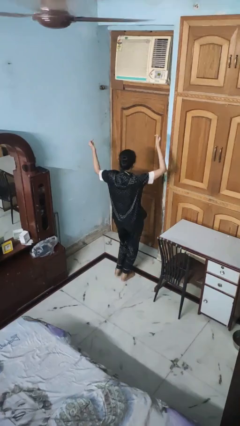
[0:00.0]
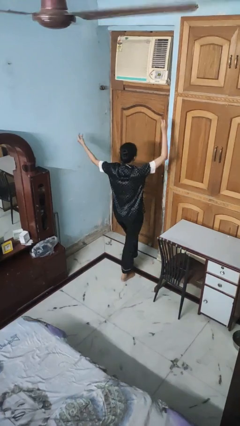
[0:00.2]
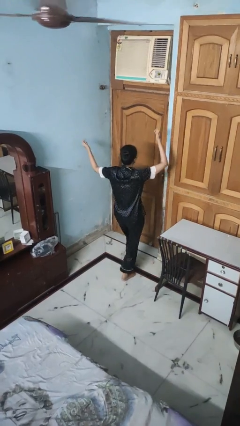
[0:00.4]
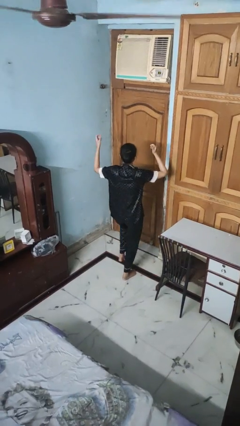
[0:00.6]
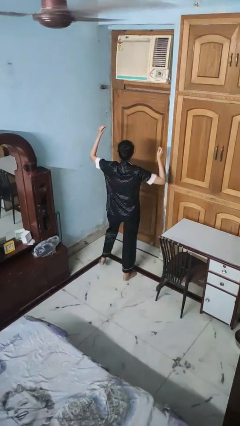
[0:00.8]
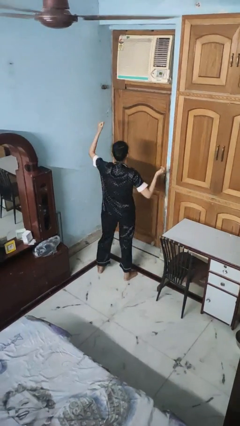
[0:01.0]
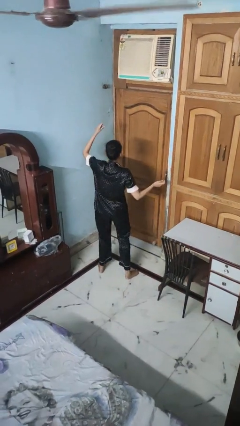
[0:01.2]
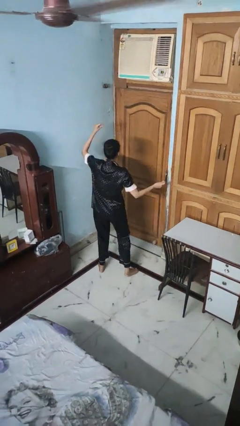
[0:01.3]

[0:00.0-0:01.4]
person dances in place

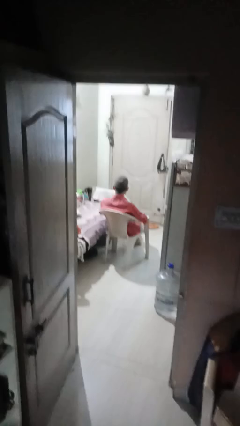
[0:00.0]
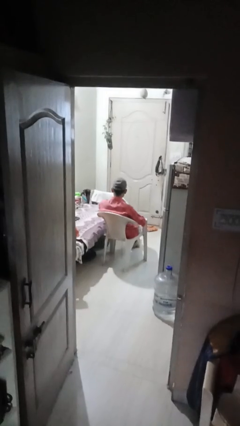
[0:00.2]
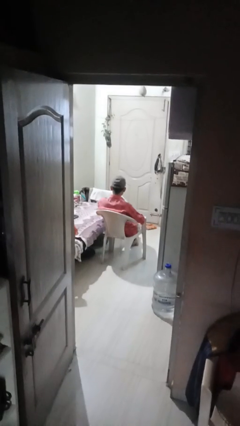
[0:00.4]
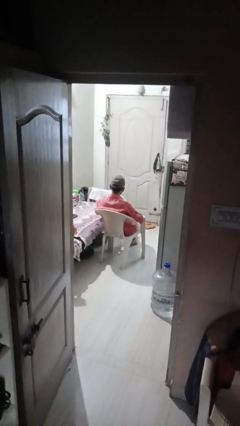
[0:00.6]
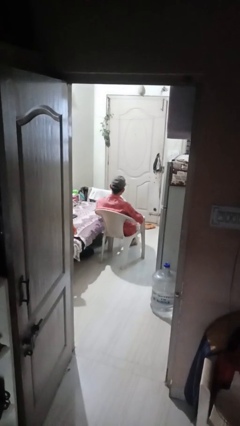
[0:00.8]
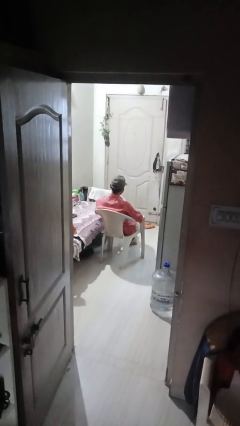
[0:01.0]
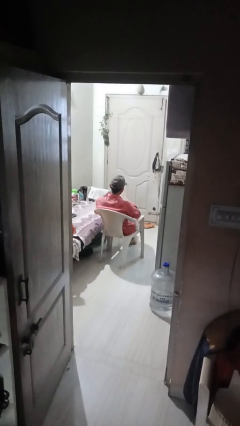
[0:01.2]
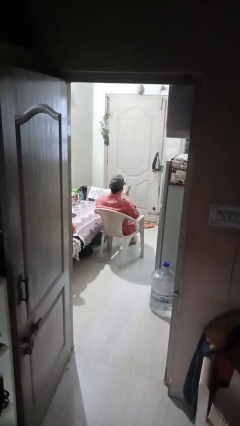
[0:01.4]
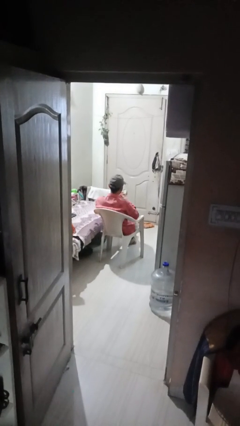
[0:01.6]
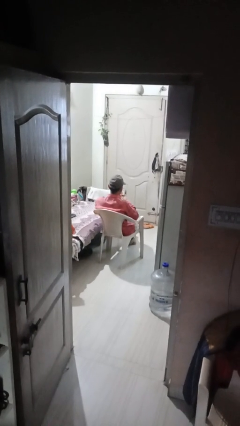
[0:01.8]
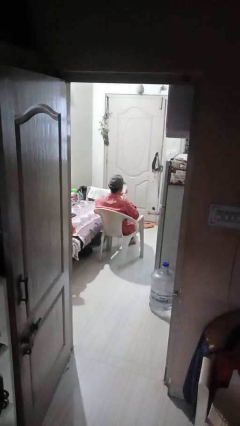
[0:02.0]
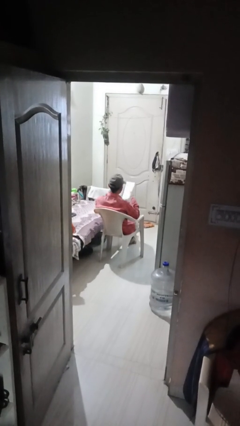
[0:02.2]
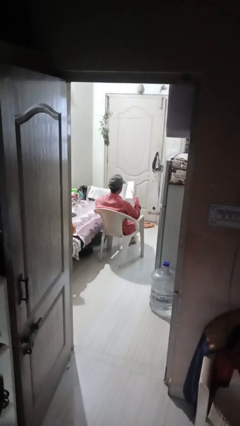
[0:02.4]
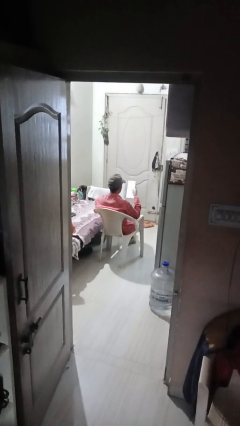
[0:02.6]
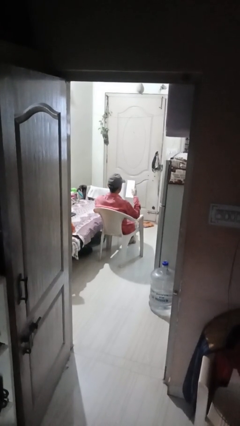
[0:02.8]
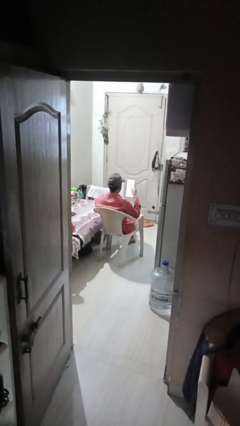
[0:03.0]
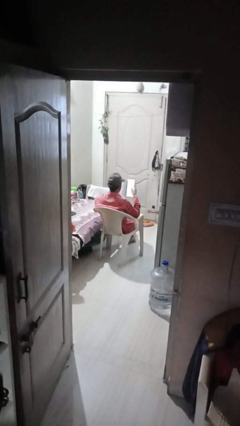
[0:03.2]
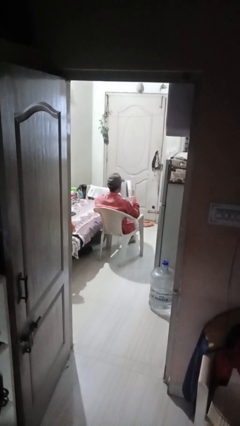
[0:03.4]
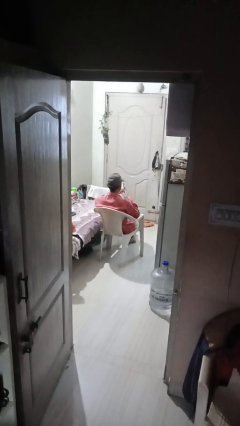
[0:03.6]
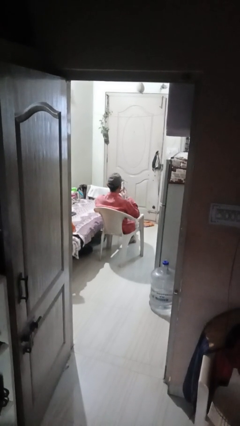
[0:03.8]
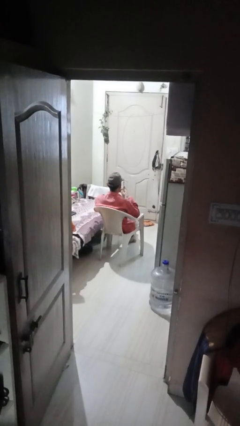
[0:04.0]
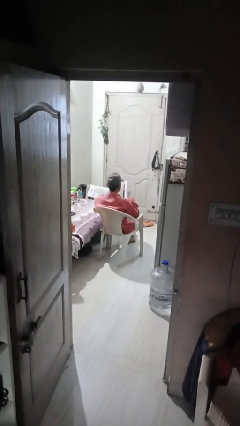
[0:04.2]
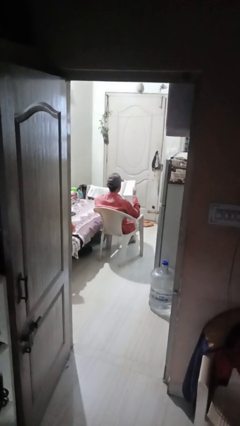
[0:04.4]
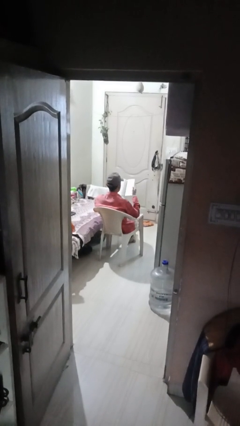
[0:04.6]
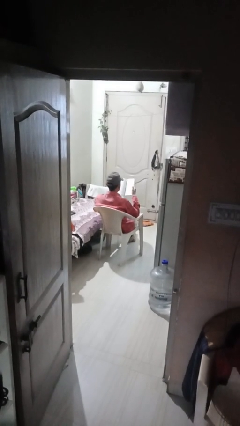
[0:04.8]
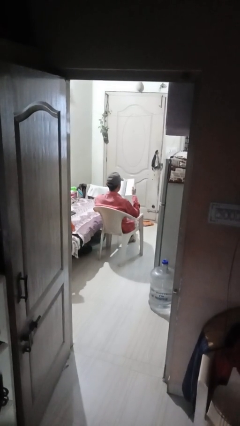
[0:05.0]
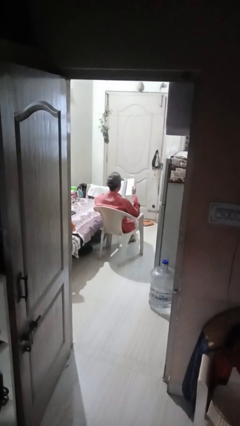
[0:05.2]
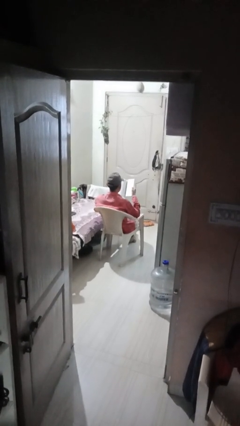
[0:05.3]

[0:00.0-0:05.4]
person reads book

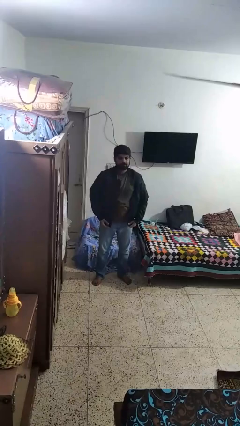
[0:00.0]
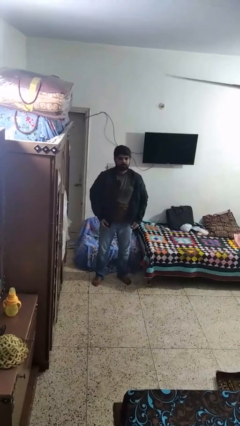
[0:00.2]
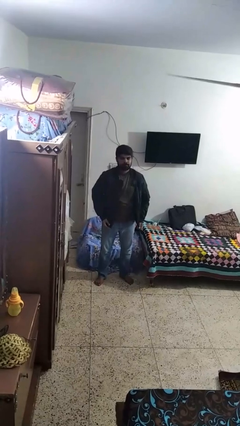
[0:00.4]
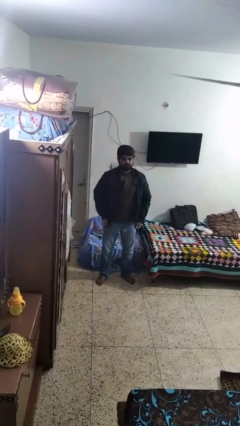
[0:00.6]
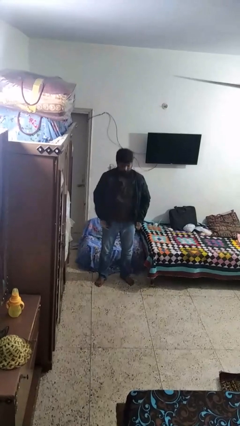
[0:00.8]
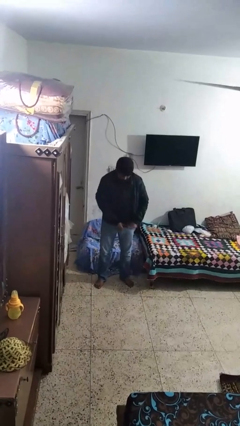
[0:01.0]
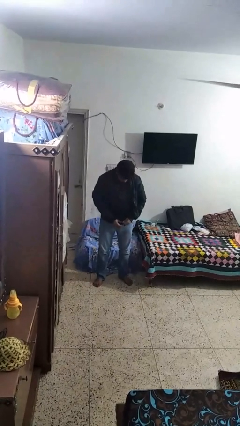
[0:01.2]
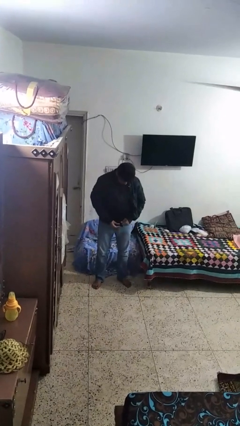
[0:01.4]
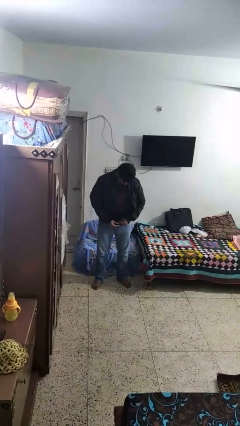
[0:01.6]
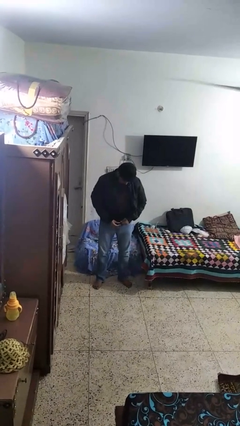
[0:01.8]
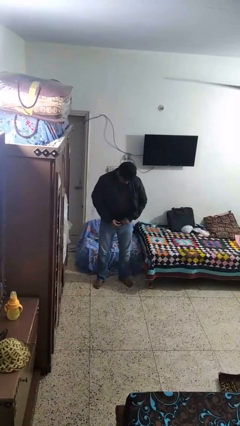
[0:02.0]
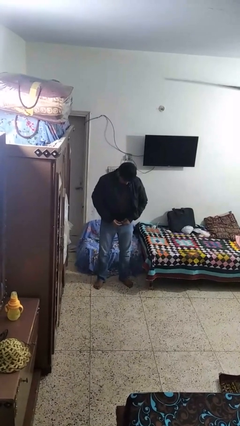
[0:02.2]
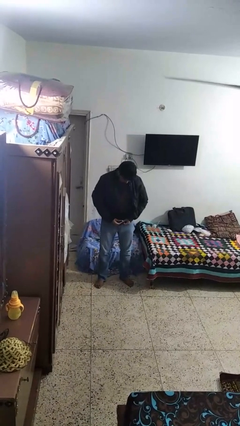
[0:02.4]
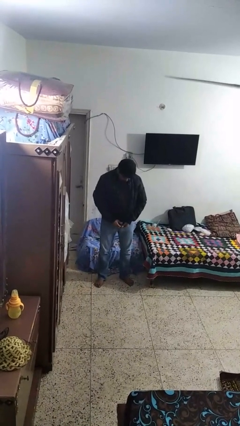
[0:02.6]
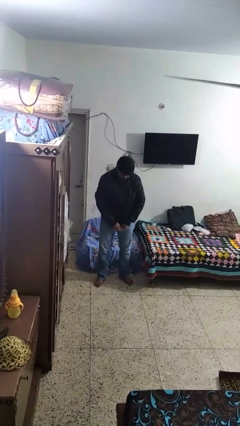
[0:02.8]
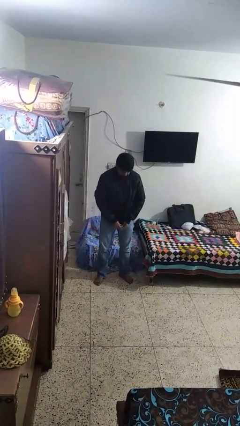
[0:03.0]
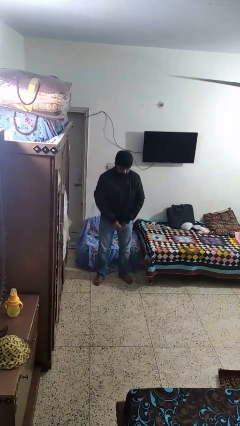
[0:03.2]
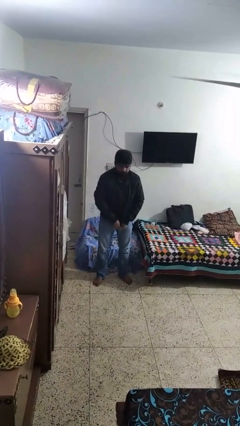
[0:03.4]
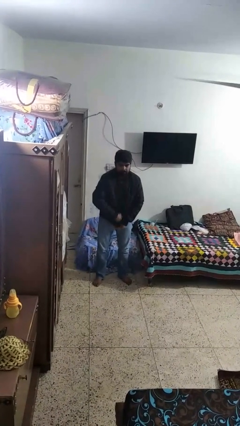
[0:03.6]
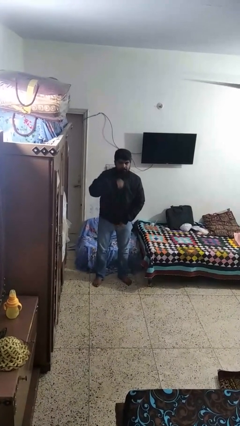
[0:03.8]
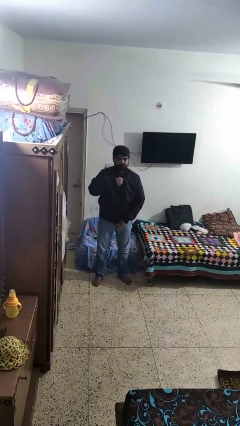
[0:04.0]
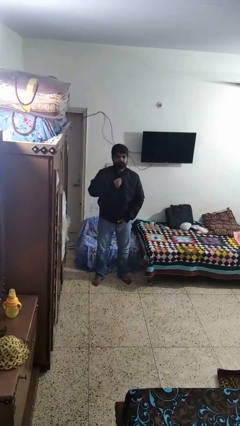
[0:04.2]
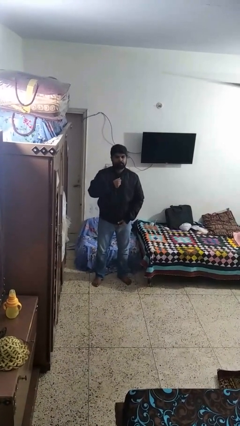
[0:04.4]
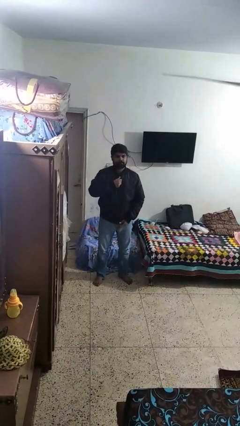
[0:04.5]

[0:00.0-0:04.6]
person zips up jacket

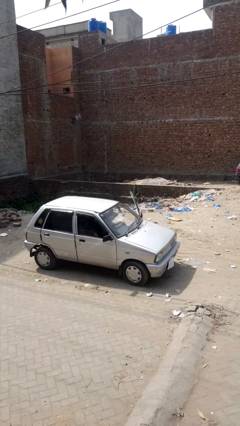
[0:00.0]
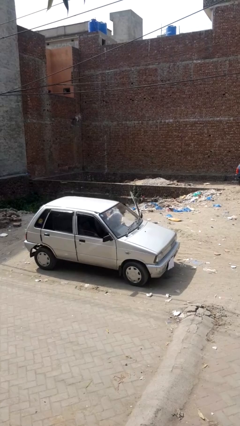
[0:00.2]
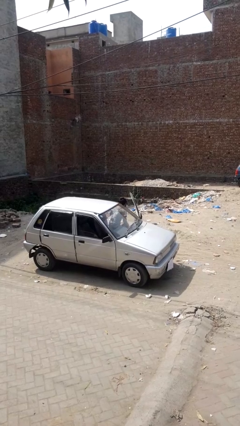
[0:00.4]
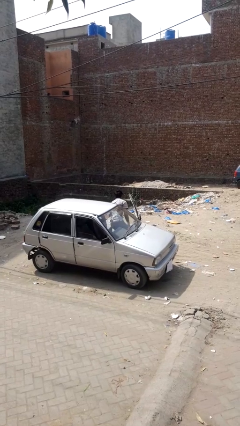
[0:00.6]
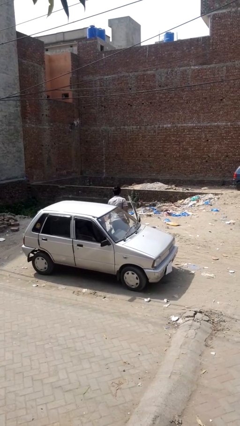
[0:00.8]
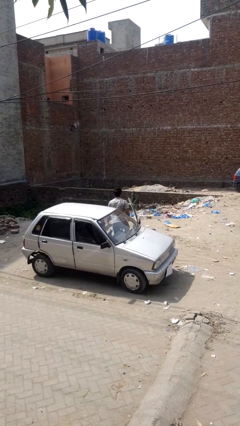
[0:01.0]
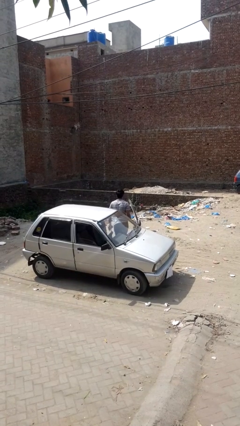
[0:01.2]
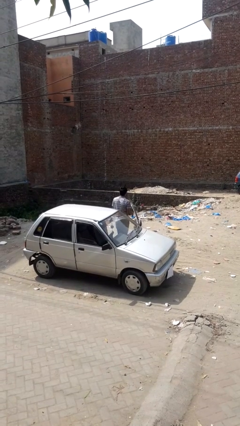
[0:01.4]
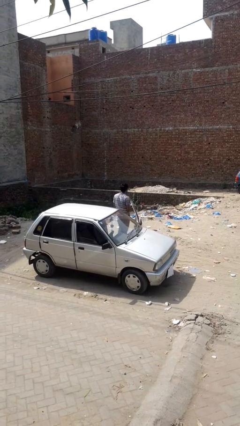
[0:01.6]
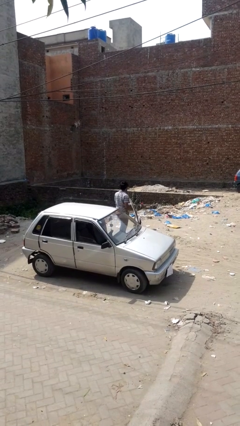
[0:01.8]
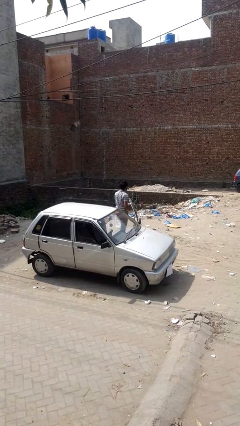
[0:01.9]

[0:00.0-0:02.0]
person exits car

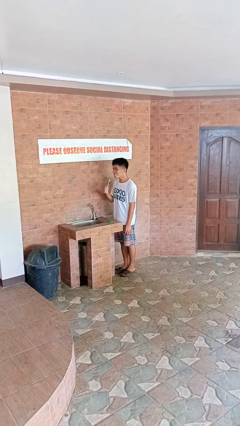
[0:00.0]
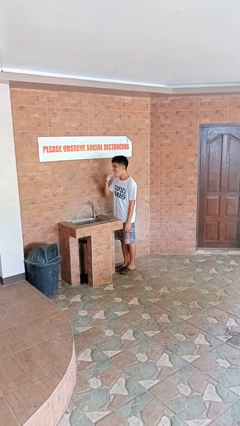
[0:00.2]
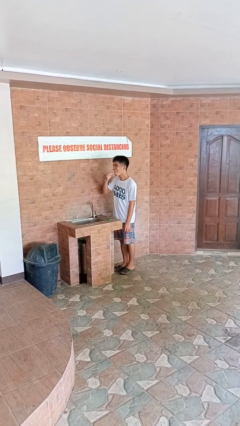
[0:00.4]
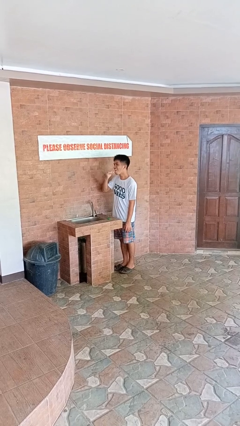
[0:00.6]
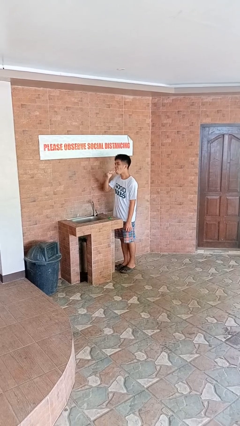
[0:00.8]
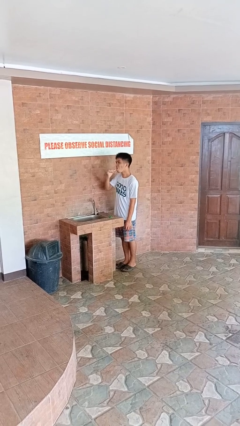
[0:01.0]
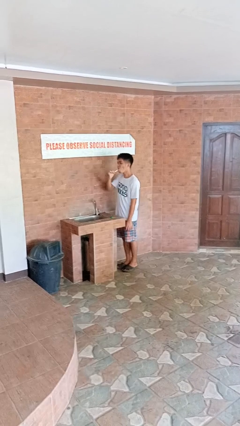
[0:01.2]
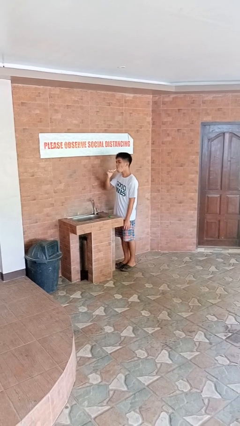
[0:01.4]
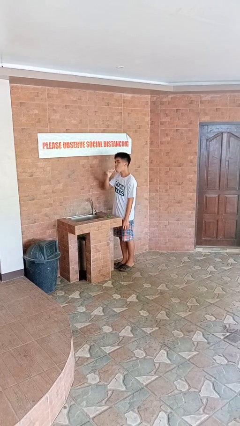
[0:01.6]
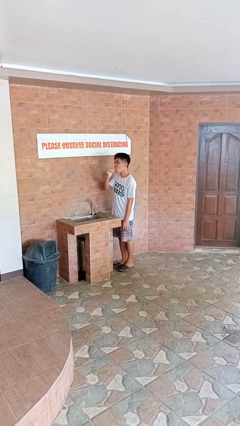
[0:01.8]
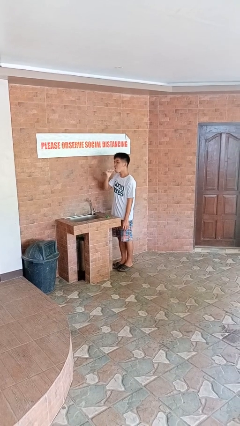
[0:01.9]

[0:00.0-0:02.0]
person brushes teeth

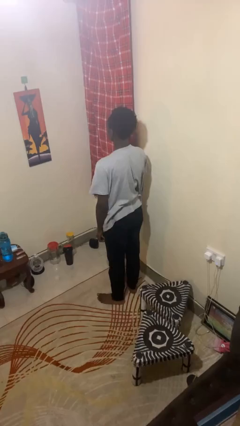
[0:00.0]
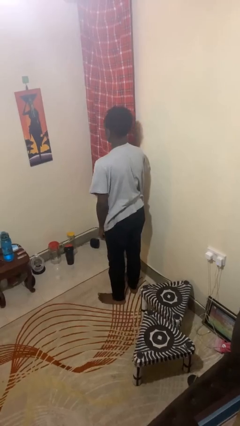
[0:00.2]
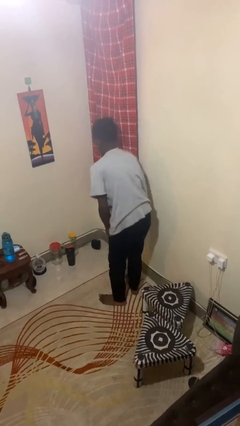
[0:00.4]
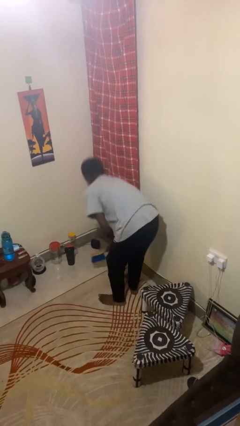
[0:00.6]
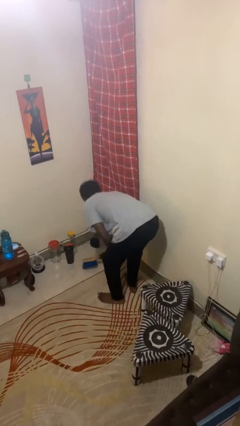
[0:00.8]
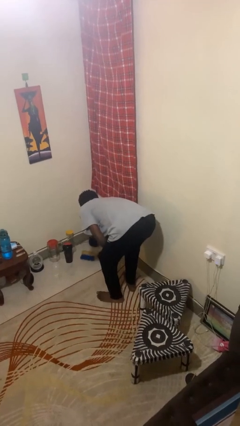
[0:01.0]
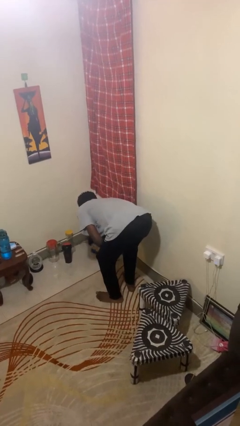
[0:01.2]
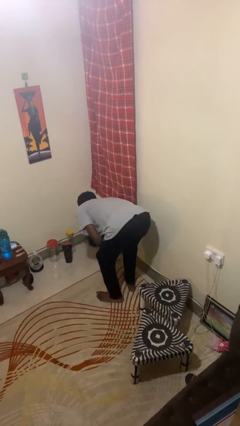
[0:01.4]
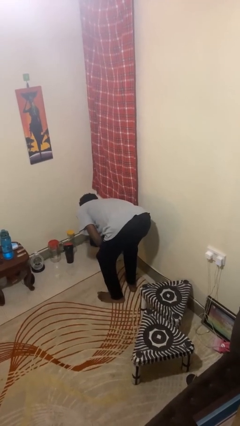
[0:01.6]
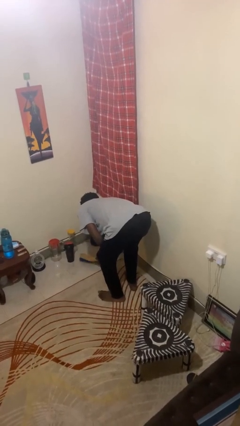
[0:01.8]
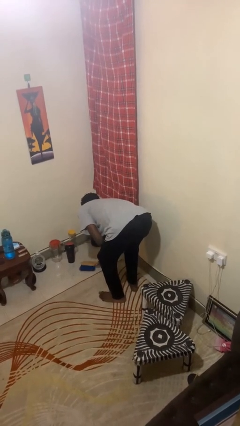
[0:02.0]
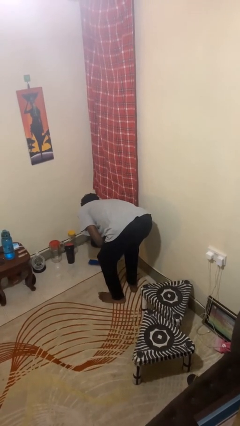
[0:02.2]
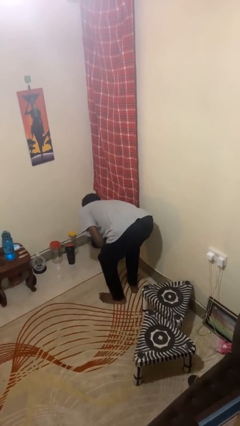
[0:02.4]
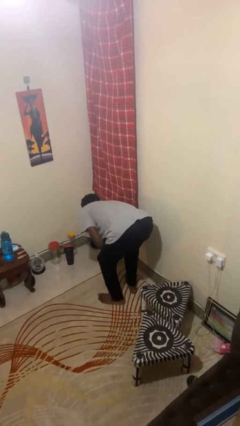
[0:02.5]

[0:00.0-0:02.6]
person sweeps floor
